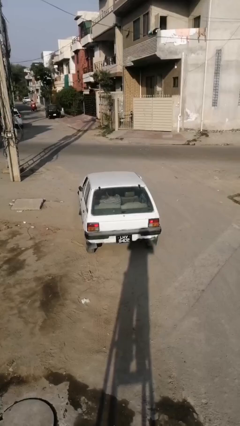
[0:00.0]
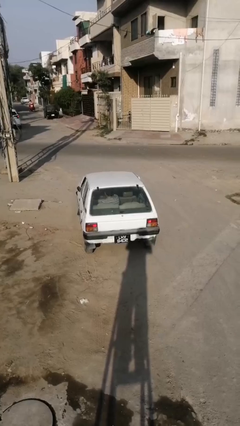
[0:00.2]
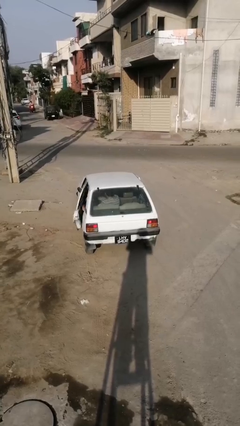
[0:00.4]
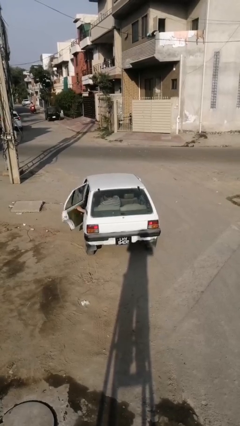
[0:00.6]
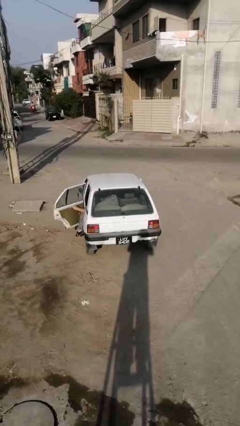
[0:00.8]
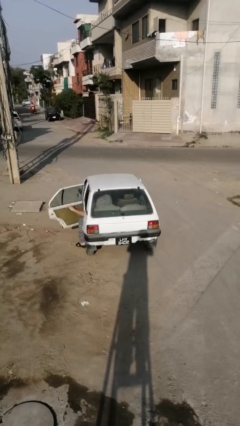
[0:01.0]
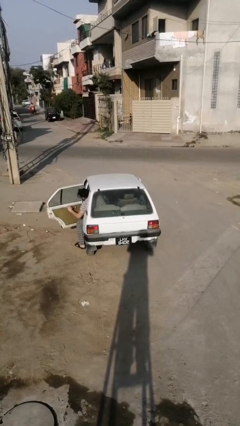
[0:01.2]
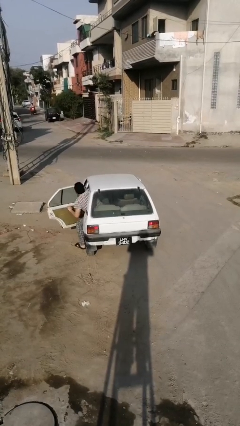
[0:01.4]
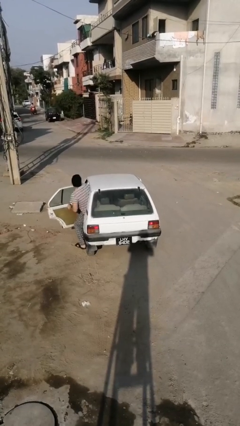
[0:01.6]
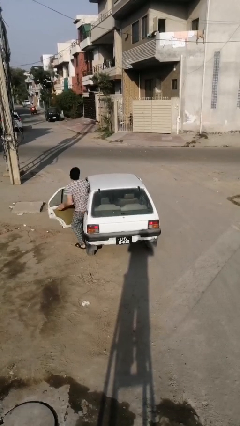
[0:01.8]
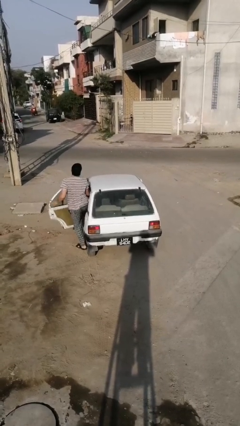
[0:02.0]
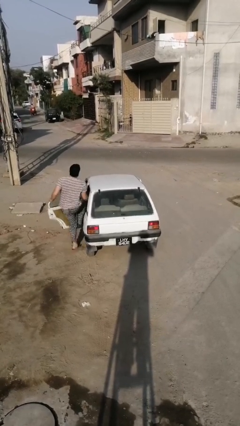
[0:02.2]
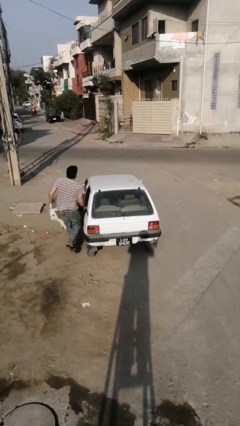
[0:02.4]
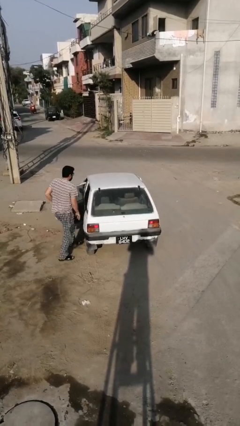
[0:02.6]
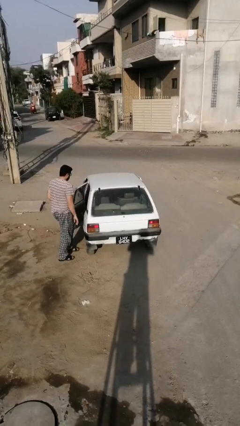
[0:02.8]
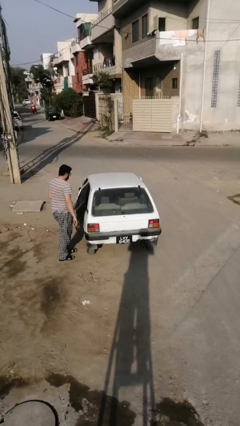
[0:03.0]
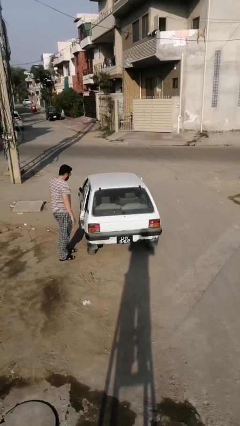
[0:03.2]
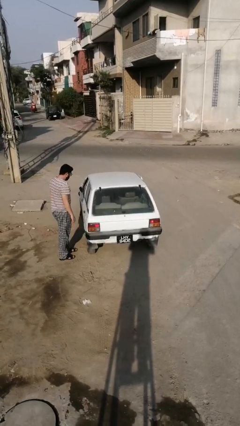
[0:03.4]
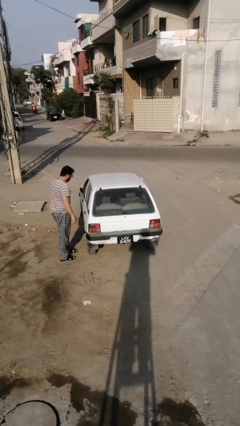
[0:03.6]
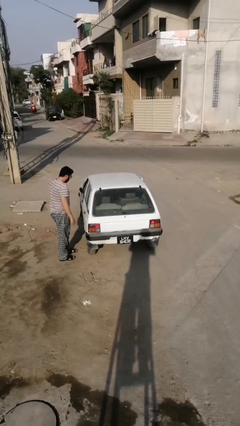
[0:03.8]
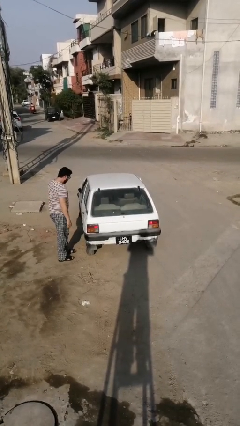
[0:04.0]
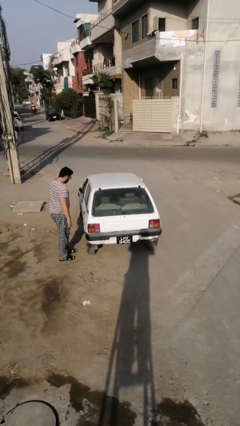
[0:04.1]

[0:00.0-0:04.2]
car drops off person

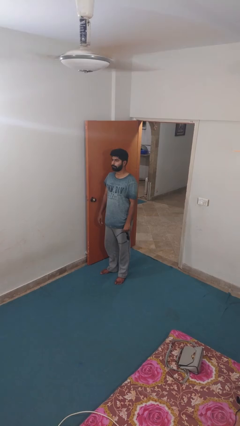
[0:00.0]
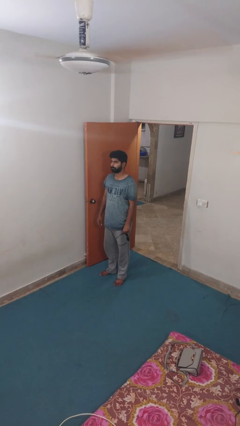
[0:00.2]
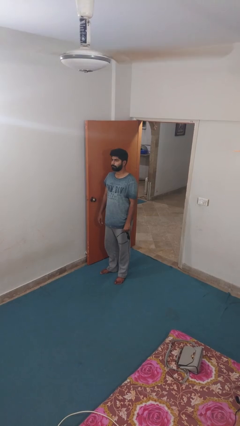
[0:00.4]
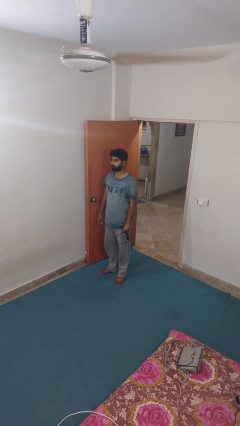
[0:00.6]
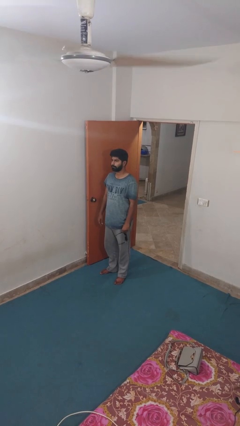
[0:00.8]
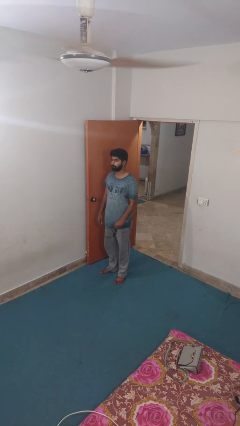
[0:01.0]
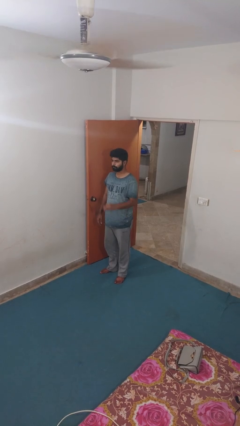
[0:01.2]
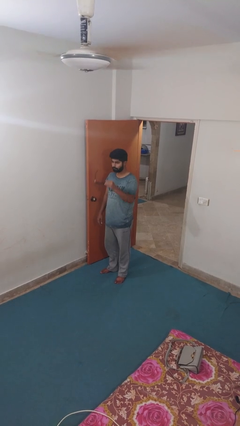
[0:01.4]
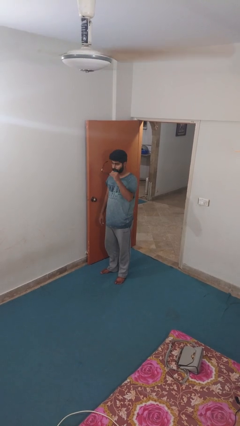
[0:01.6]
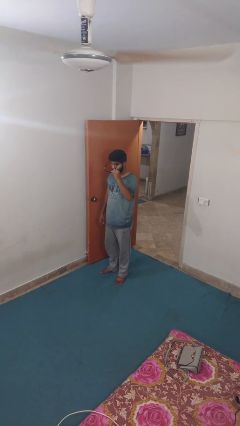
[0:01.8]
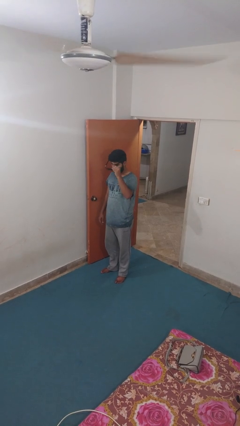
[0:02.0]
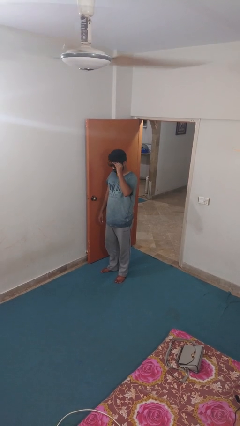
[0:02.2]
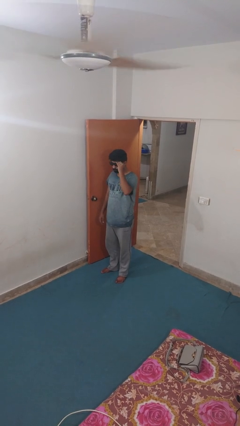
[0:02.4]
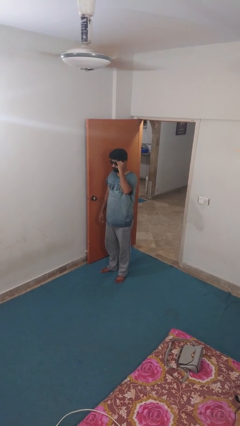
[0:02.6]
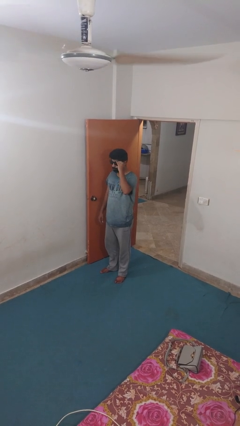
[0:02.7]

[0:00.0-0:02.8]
person puts on sunglasses

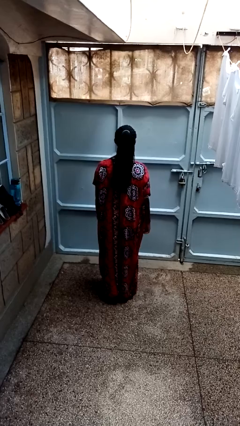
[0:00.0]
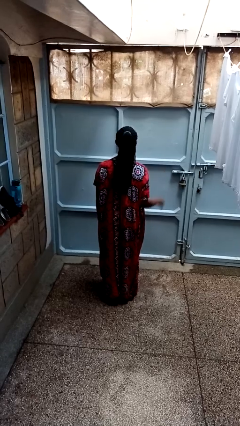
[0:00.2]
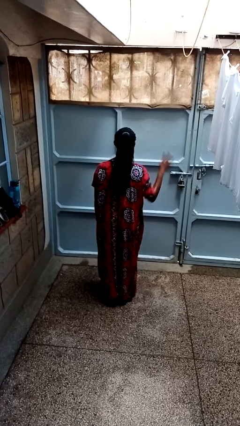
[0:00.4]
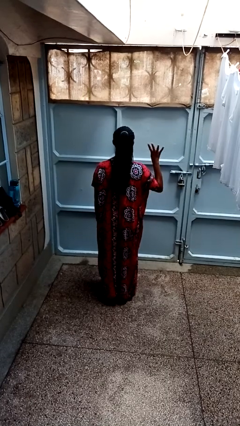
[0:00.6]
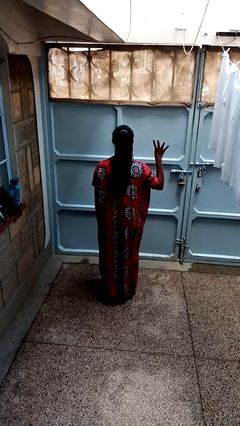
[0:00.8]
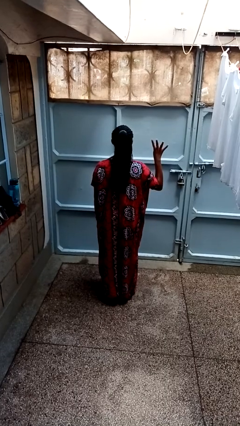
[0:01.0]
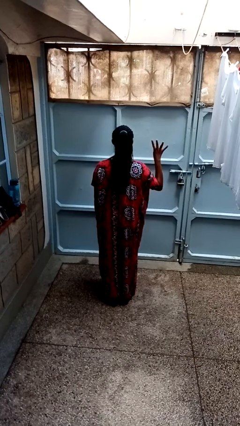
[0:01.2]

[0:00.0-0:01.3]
person gestures number four

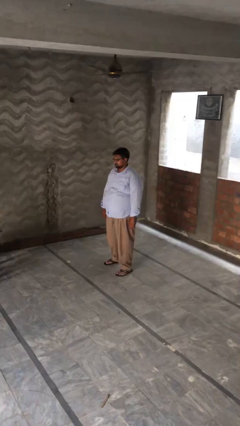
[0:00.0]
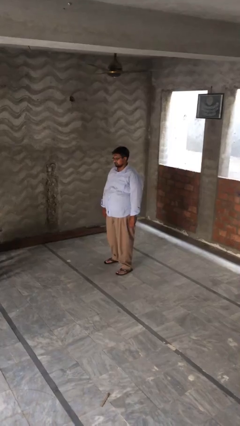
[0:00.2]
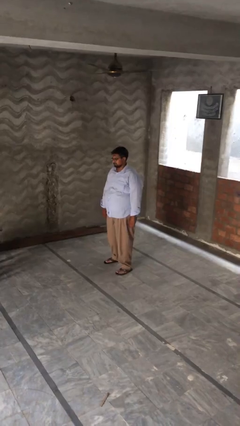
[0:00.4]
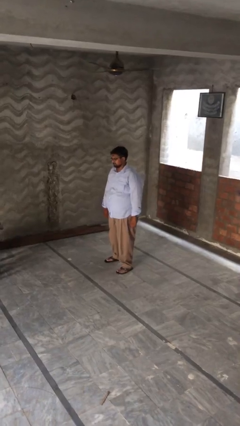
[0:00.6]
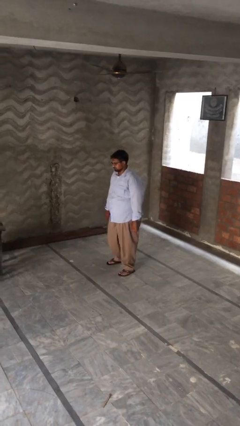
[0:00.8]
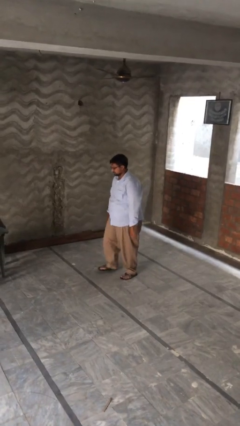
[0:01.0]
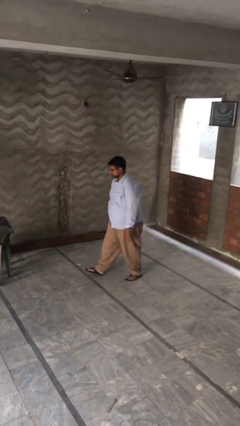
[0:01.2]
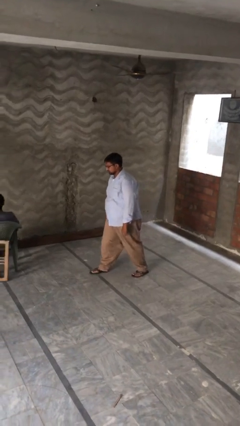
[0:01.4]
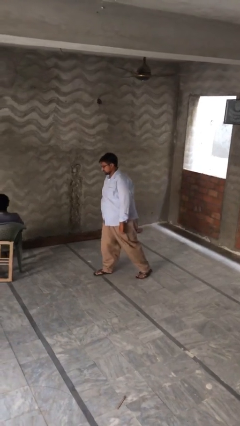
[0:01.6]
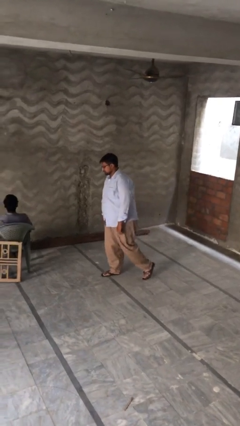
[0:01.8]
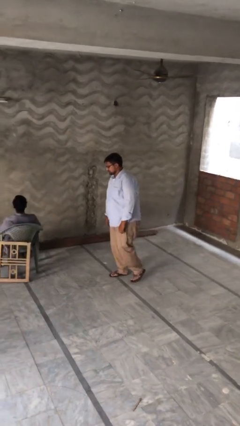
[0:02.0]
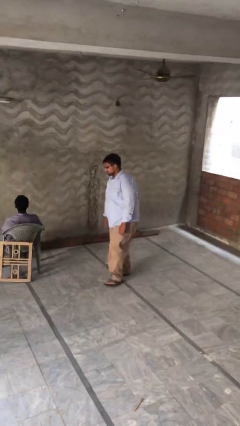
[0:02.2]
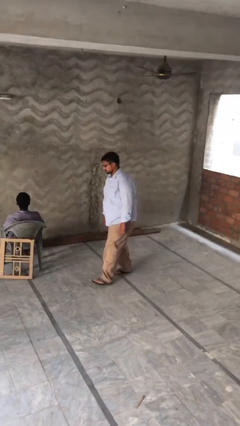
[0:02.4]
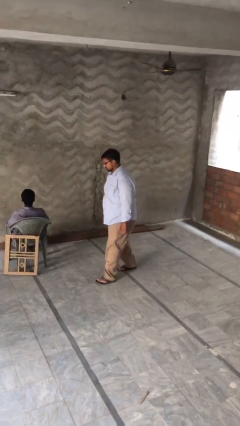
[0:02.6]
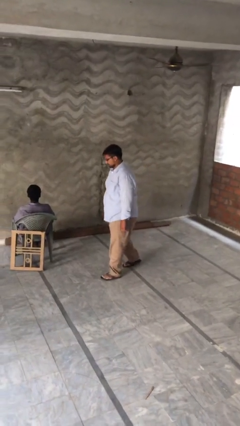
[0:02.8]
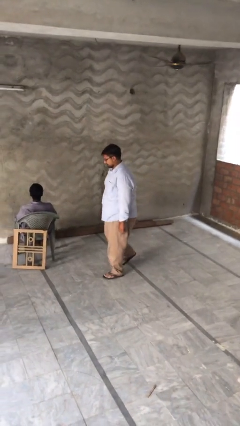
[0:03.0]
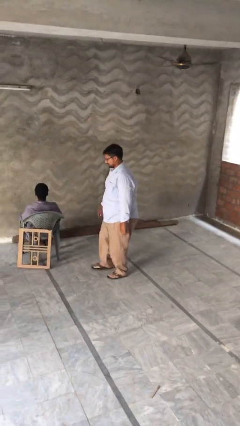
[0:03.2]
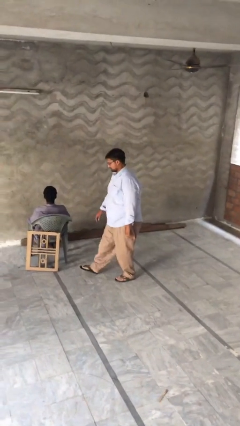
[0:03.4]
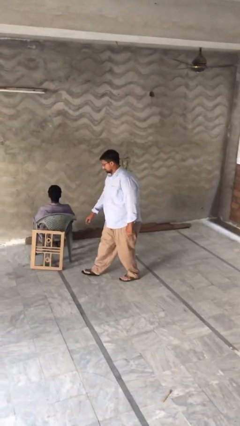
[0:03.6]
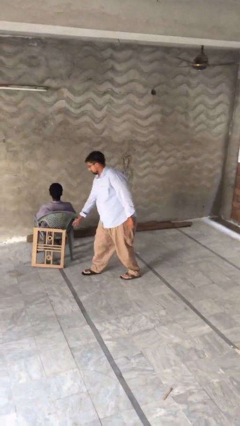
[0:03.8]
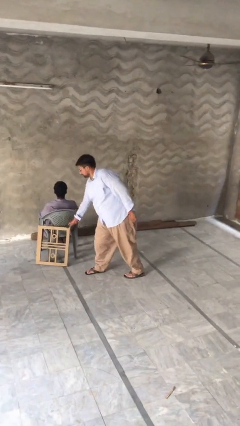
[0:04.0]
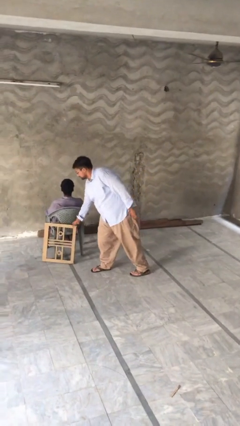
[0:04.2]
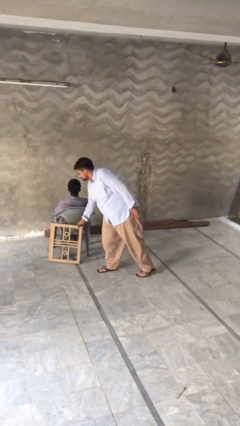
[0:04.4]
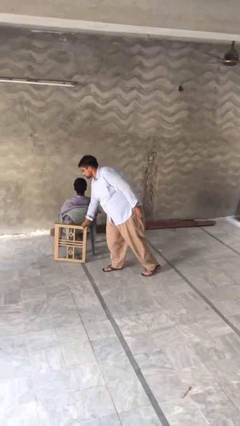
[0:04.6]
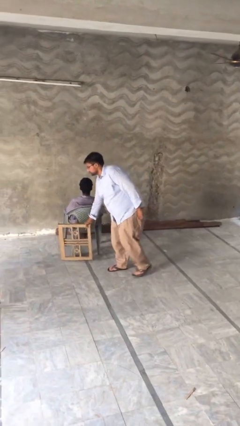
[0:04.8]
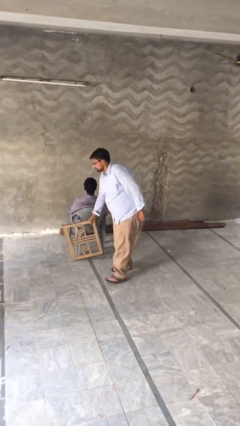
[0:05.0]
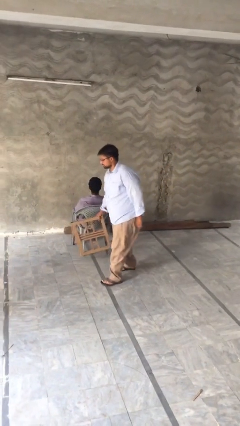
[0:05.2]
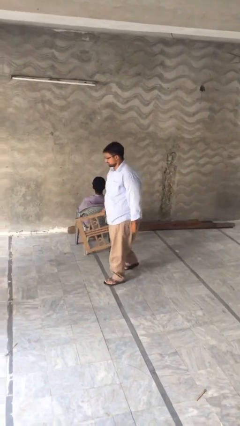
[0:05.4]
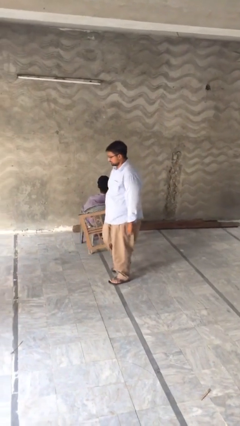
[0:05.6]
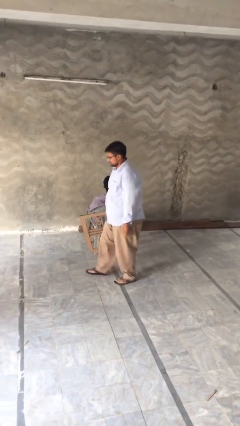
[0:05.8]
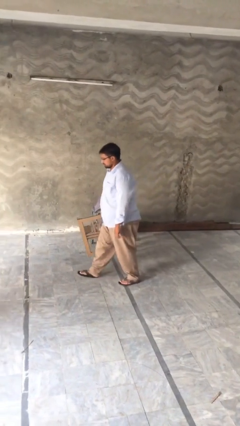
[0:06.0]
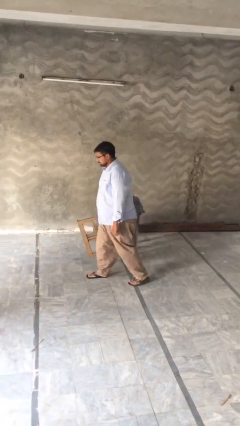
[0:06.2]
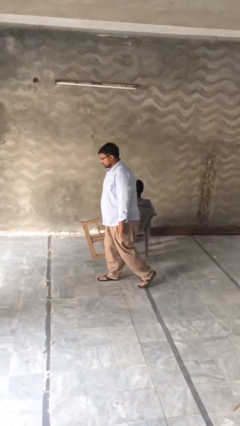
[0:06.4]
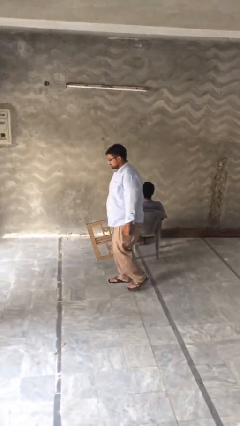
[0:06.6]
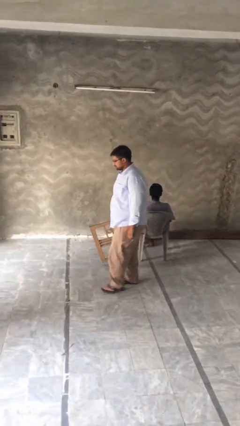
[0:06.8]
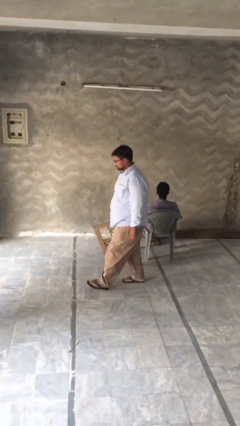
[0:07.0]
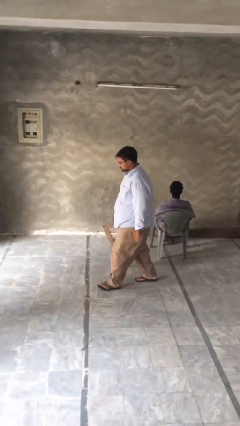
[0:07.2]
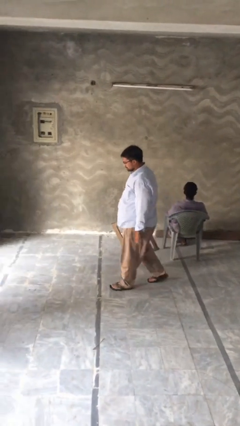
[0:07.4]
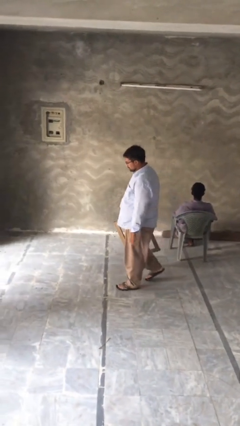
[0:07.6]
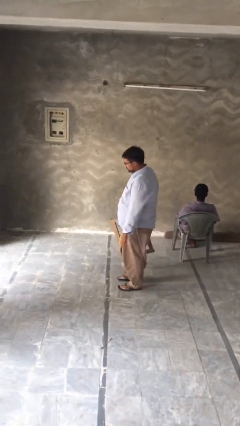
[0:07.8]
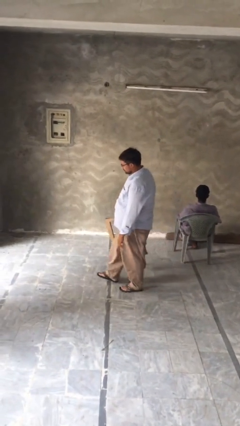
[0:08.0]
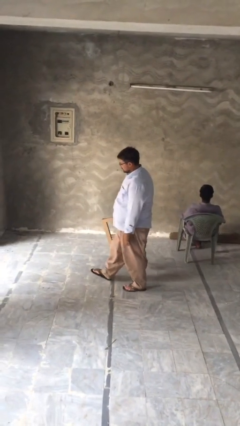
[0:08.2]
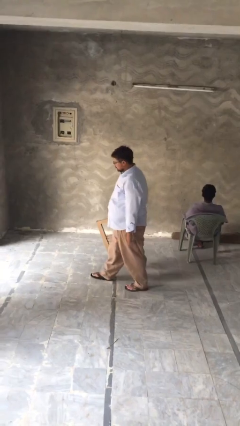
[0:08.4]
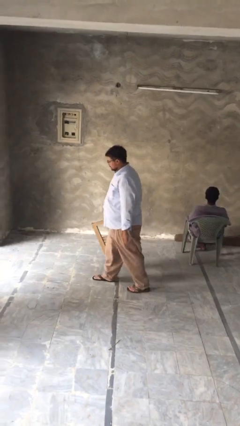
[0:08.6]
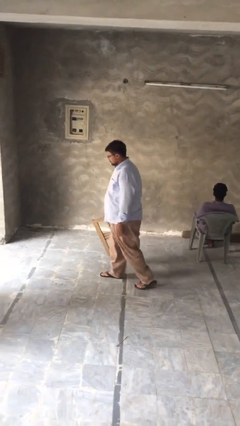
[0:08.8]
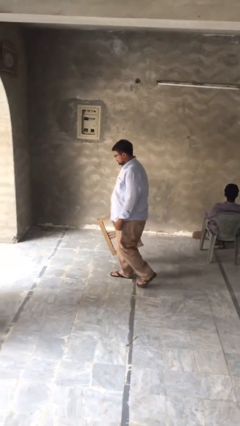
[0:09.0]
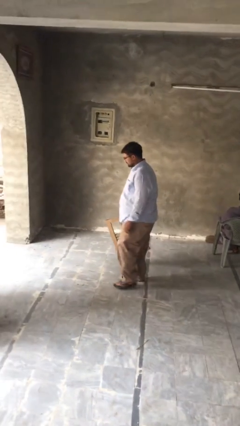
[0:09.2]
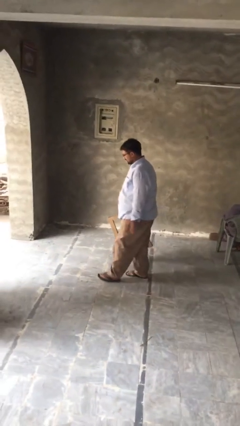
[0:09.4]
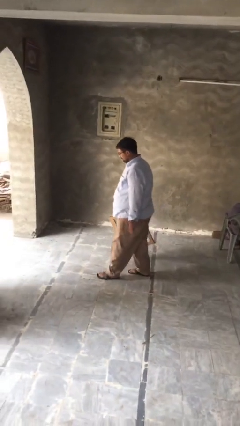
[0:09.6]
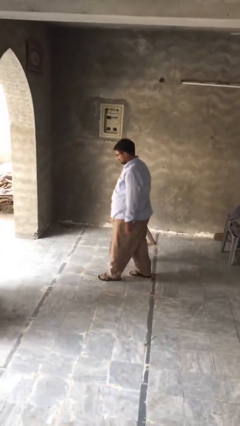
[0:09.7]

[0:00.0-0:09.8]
person steals object from person
